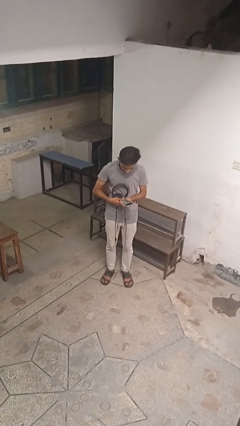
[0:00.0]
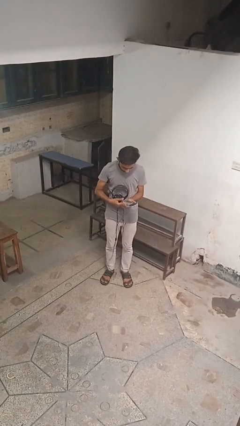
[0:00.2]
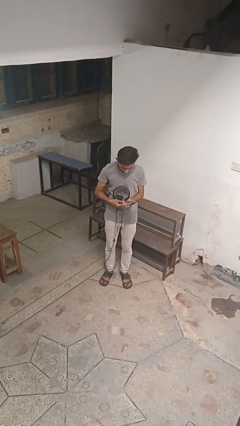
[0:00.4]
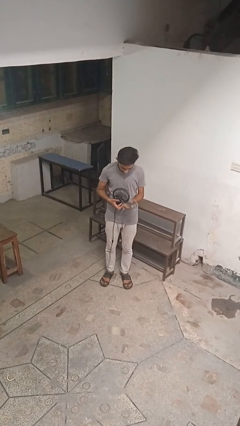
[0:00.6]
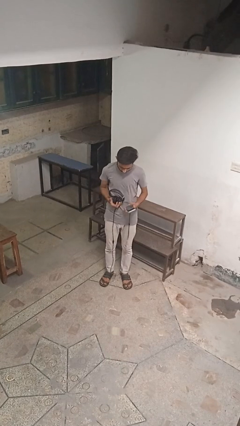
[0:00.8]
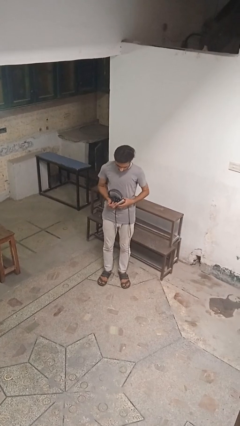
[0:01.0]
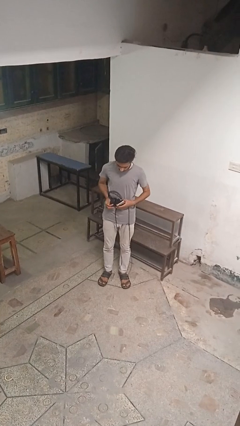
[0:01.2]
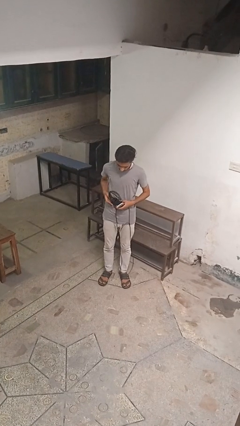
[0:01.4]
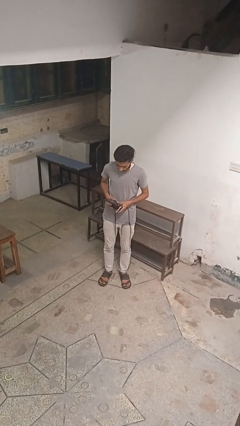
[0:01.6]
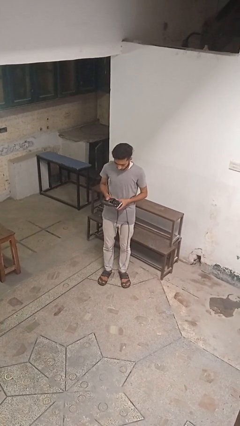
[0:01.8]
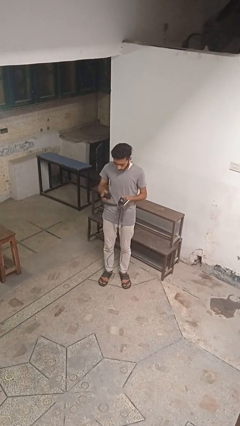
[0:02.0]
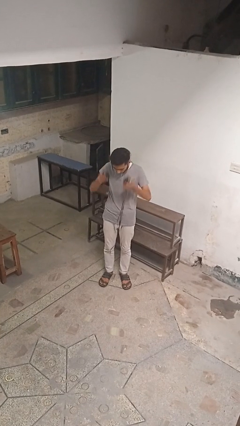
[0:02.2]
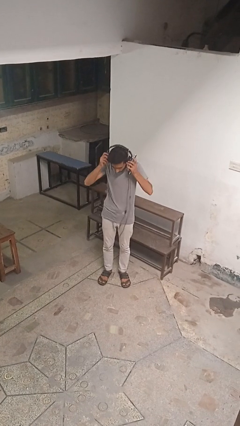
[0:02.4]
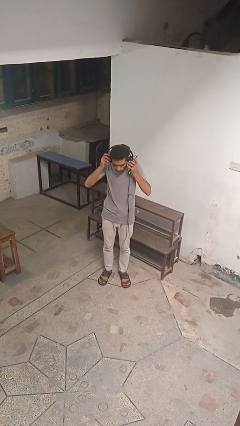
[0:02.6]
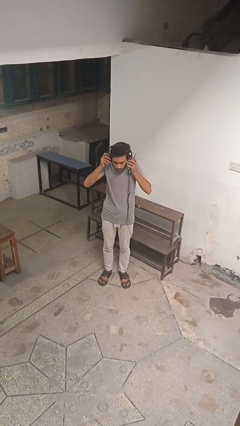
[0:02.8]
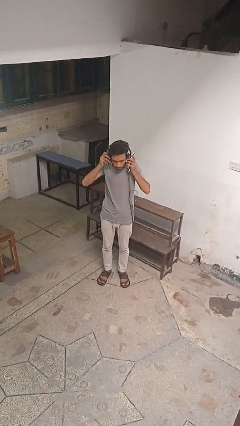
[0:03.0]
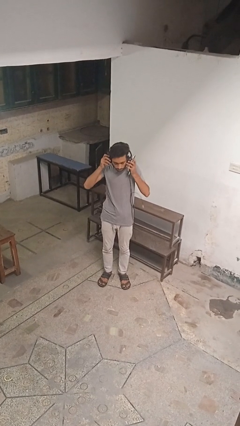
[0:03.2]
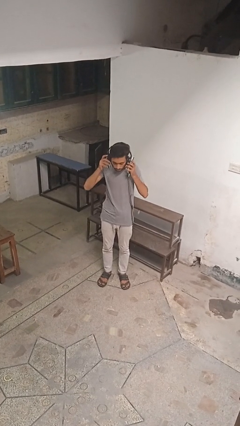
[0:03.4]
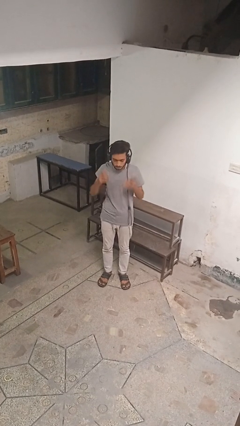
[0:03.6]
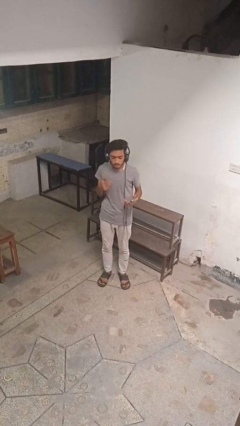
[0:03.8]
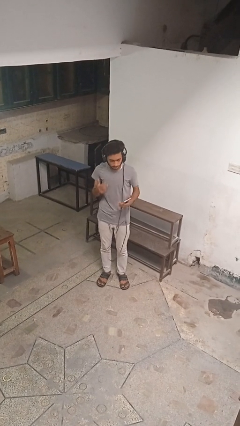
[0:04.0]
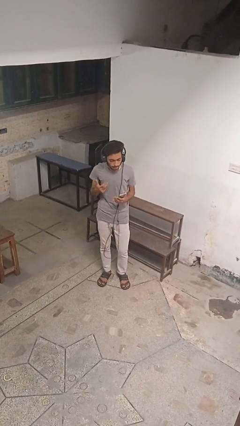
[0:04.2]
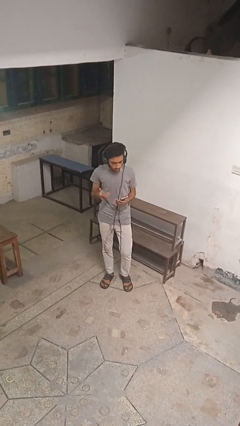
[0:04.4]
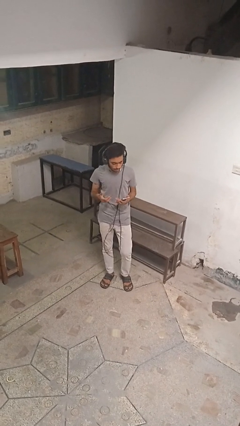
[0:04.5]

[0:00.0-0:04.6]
person puts on headphones

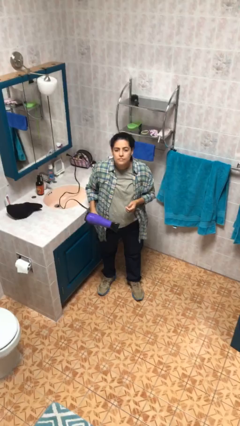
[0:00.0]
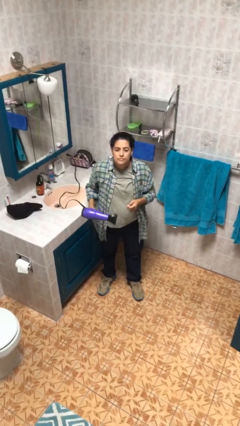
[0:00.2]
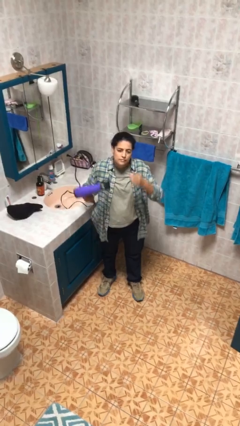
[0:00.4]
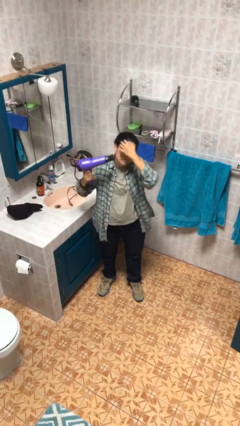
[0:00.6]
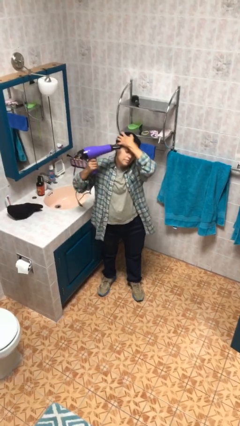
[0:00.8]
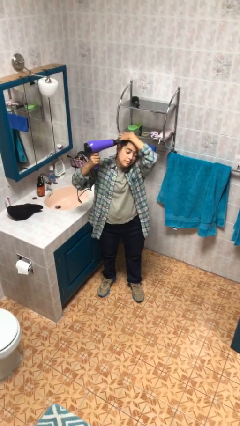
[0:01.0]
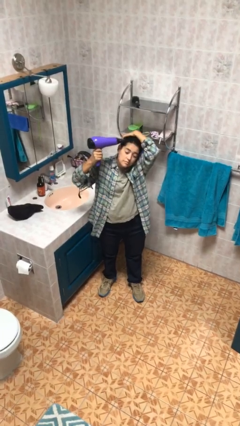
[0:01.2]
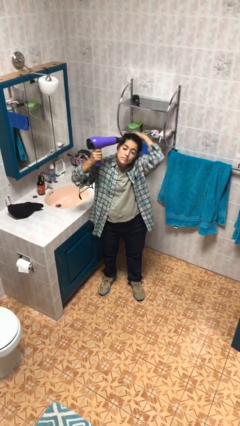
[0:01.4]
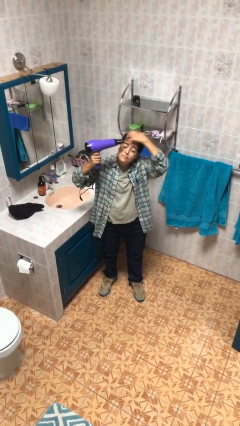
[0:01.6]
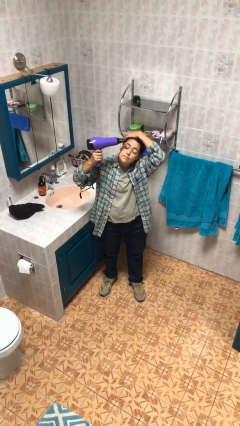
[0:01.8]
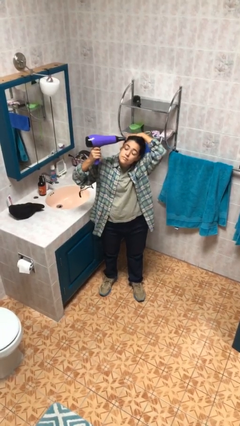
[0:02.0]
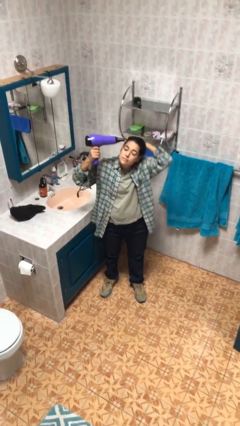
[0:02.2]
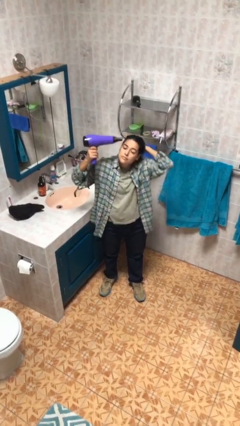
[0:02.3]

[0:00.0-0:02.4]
person dries hair with hairdryer

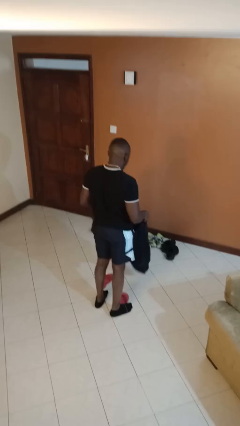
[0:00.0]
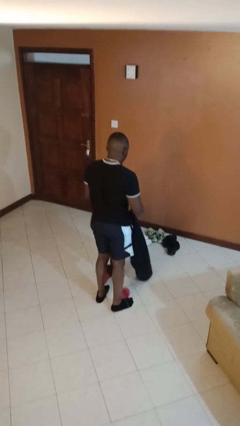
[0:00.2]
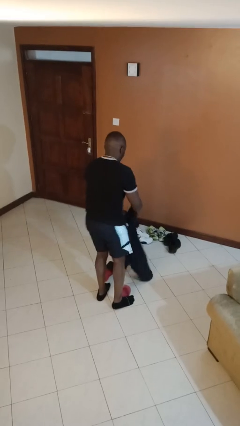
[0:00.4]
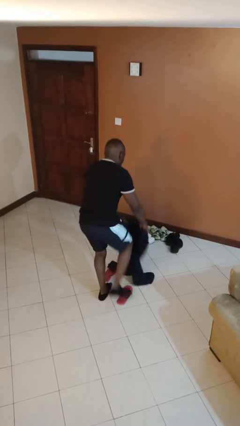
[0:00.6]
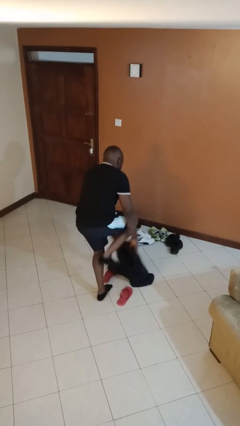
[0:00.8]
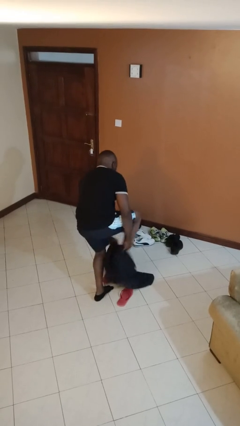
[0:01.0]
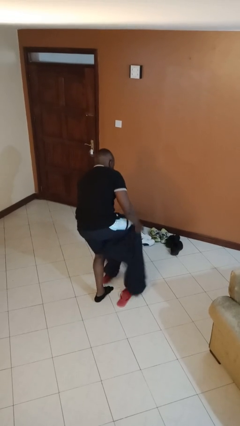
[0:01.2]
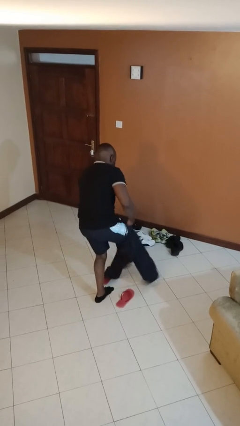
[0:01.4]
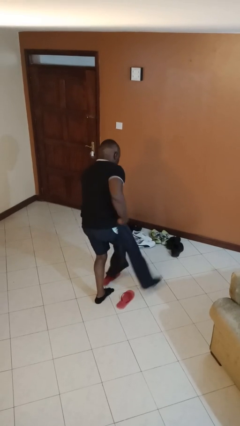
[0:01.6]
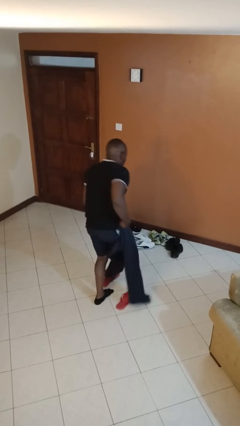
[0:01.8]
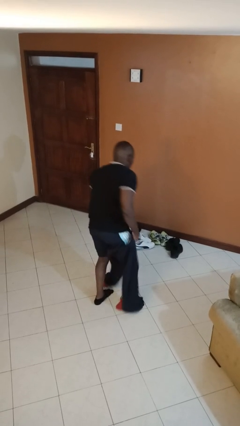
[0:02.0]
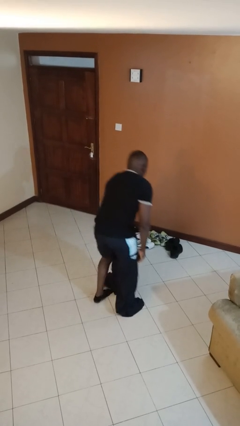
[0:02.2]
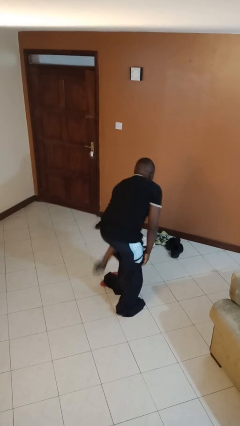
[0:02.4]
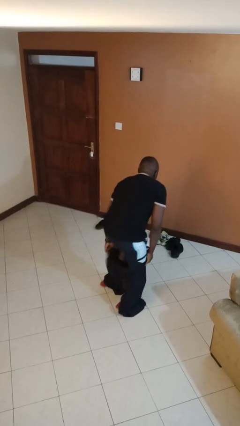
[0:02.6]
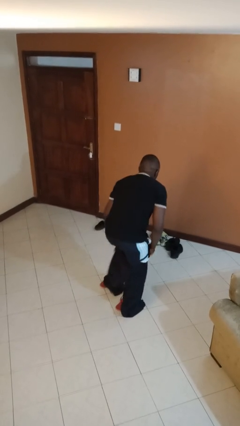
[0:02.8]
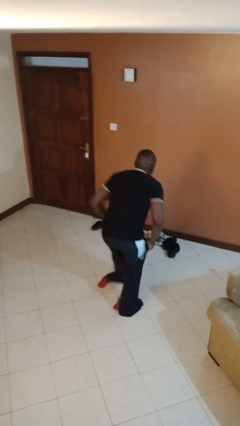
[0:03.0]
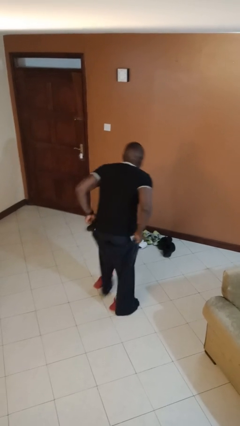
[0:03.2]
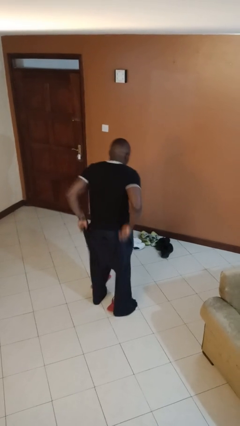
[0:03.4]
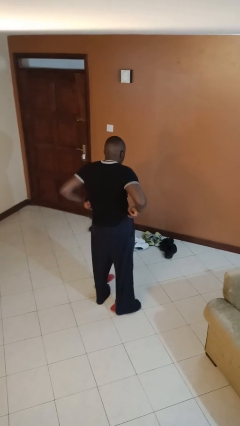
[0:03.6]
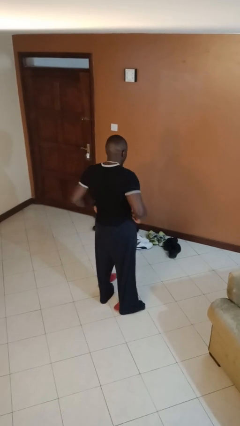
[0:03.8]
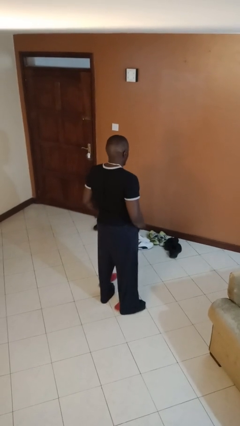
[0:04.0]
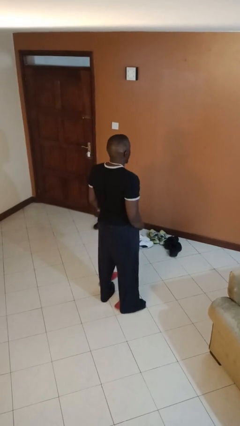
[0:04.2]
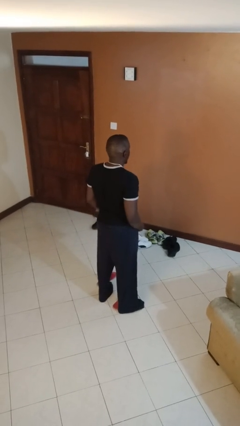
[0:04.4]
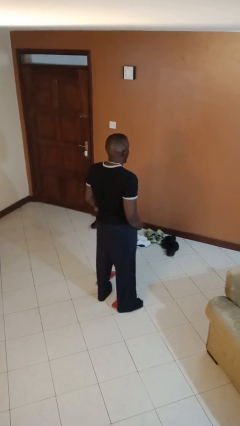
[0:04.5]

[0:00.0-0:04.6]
person puts on pants

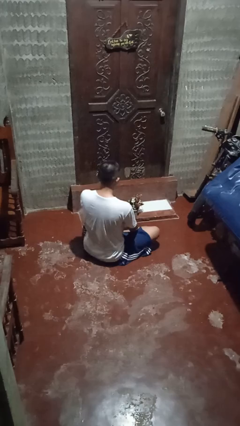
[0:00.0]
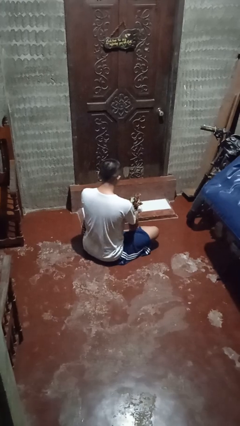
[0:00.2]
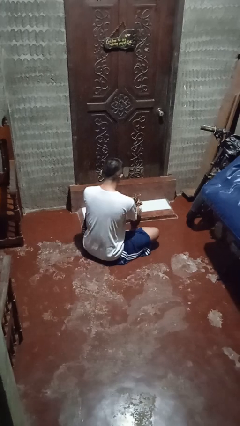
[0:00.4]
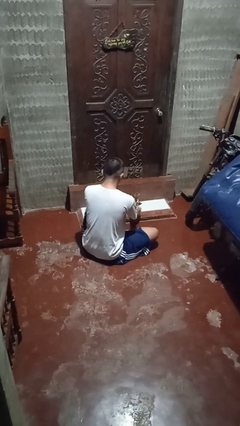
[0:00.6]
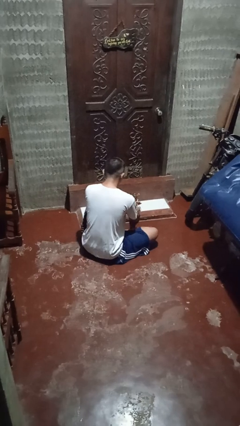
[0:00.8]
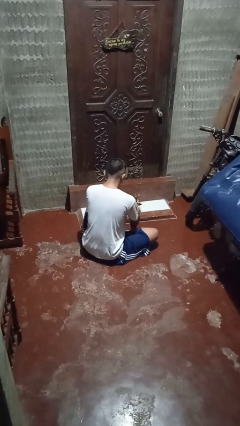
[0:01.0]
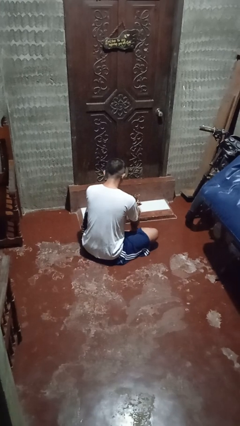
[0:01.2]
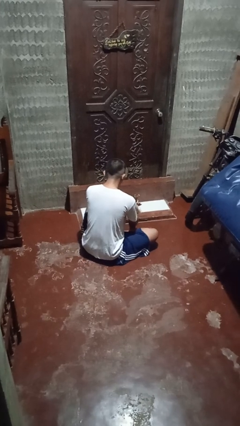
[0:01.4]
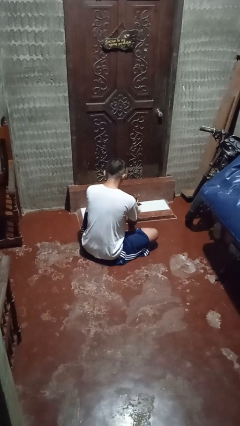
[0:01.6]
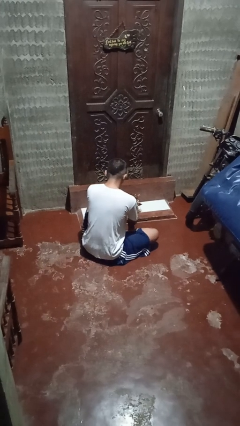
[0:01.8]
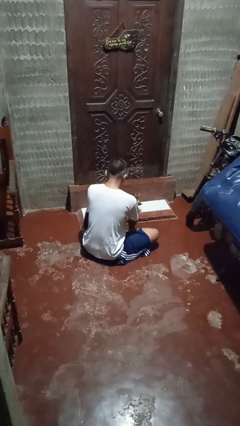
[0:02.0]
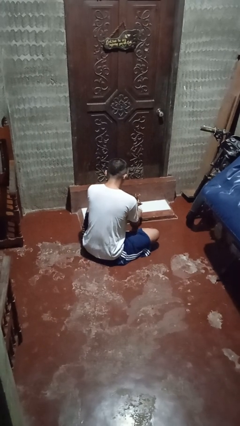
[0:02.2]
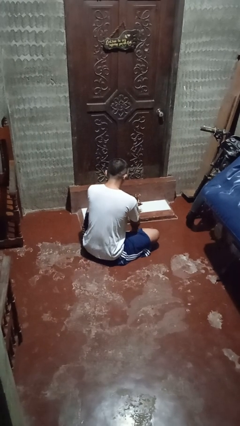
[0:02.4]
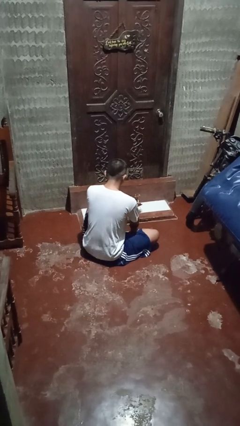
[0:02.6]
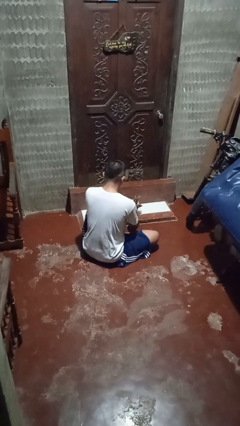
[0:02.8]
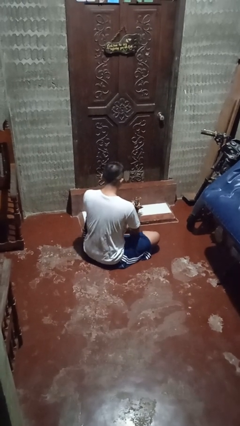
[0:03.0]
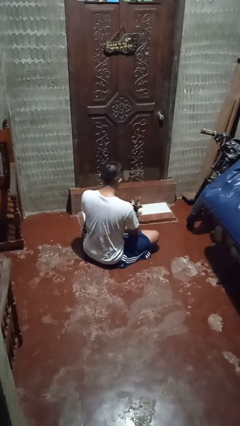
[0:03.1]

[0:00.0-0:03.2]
person arranges flowers in vase

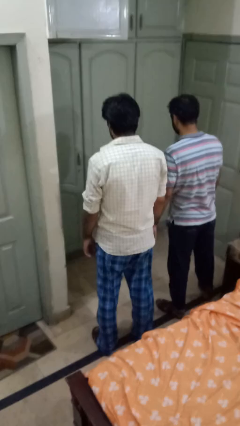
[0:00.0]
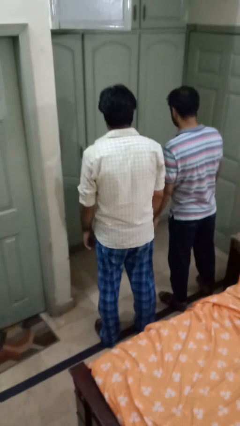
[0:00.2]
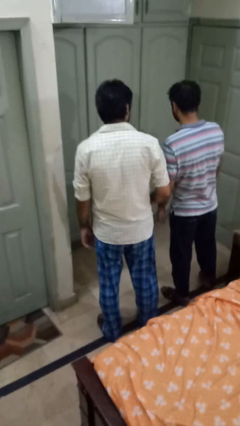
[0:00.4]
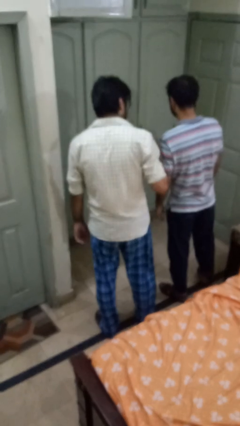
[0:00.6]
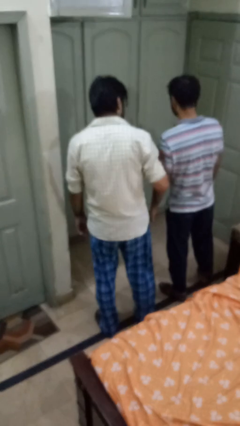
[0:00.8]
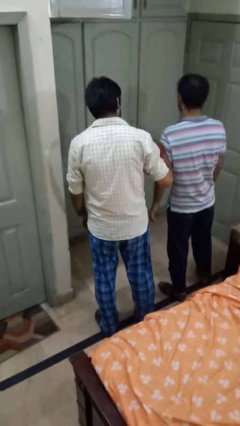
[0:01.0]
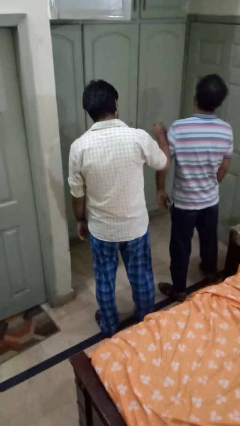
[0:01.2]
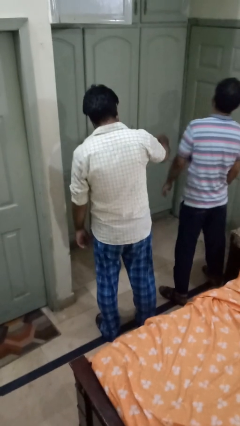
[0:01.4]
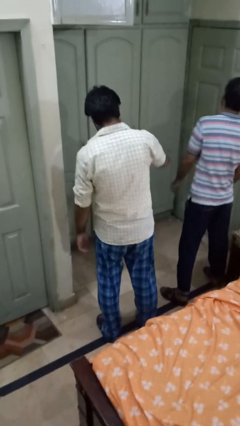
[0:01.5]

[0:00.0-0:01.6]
person shoves person

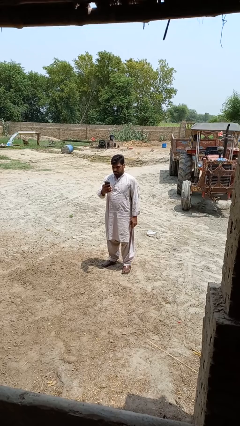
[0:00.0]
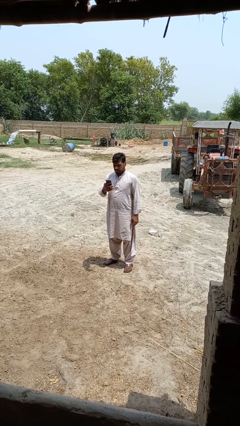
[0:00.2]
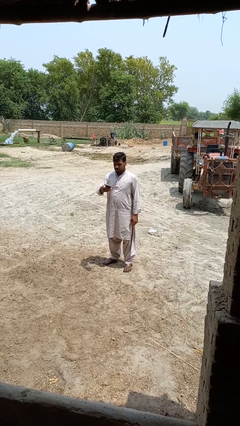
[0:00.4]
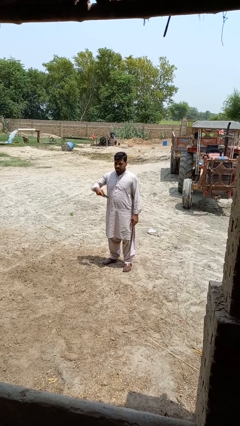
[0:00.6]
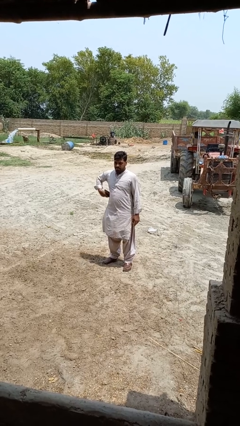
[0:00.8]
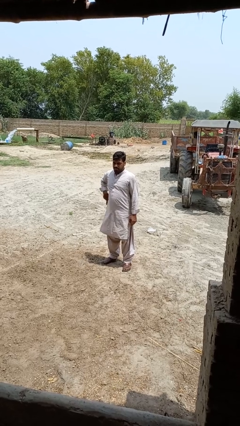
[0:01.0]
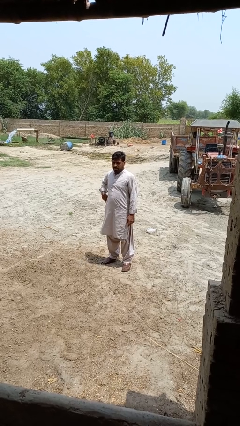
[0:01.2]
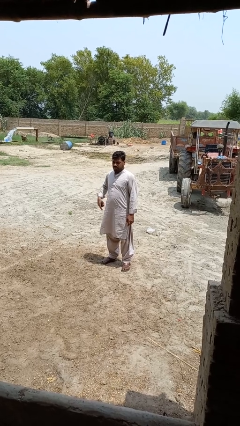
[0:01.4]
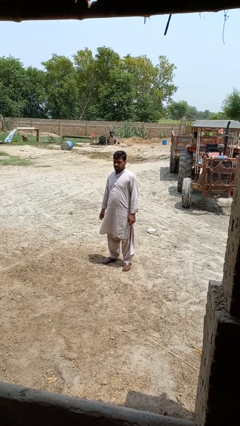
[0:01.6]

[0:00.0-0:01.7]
person puts phone into pocket
